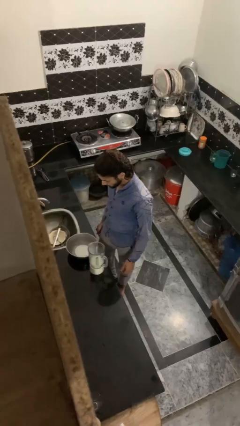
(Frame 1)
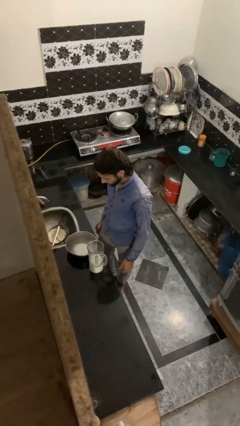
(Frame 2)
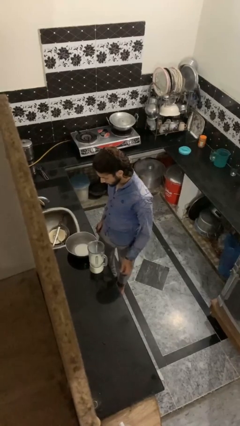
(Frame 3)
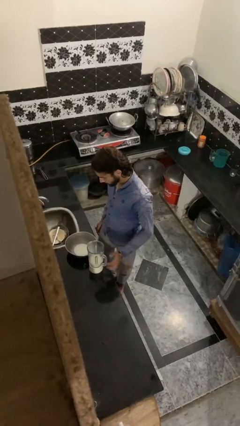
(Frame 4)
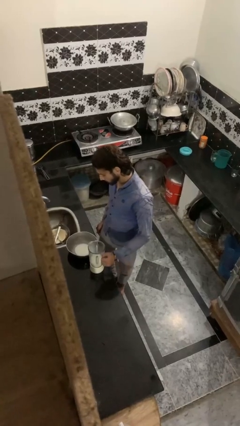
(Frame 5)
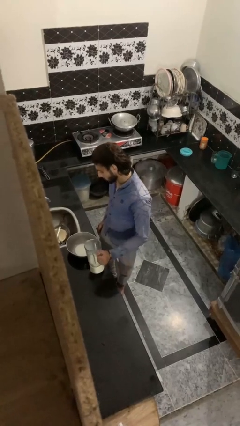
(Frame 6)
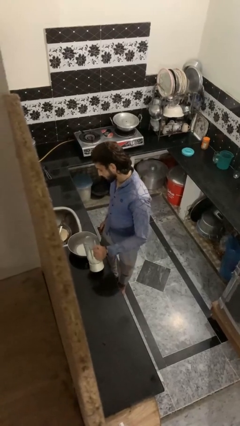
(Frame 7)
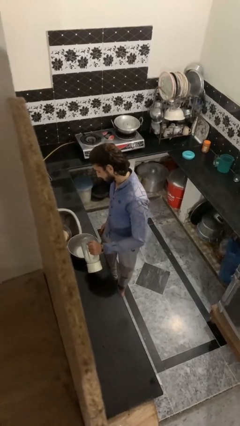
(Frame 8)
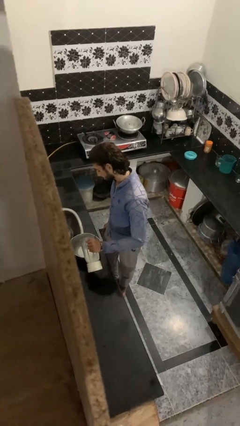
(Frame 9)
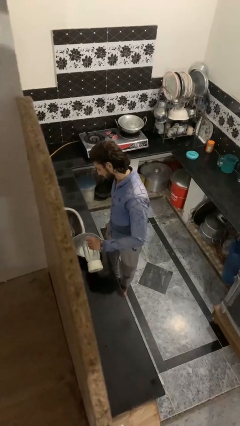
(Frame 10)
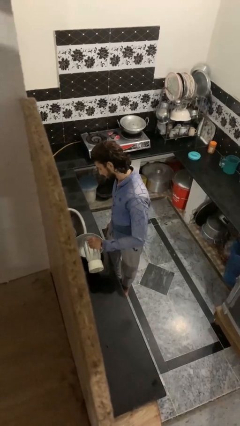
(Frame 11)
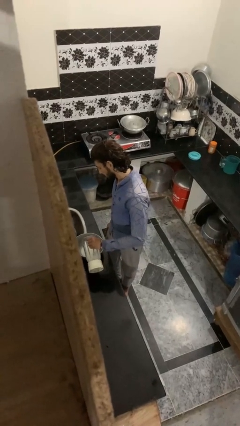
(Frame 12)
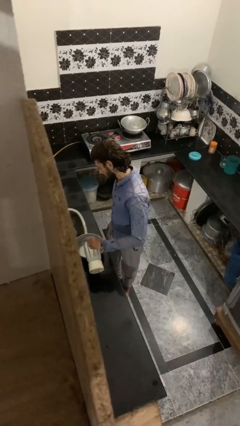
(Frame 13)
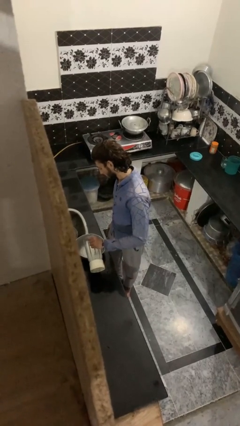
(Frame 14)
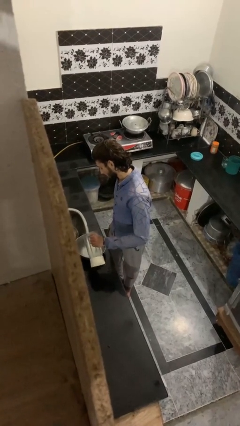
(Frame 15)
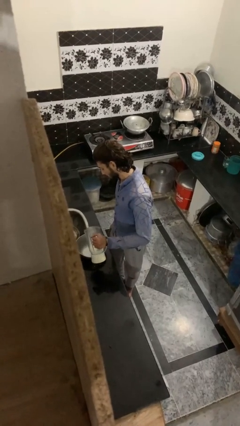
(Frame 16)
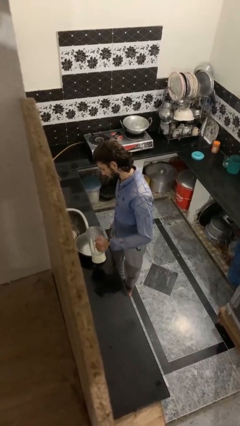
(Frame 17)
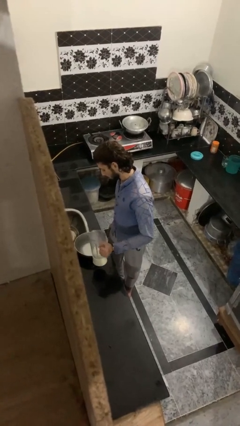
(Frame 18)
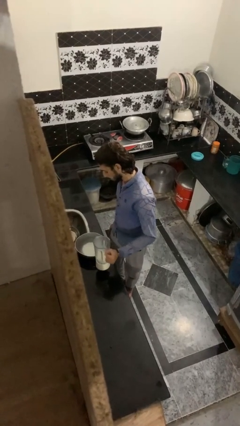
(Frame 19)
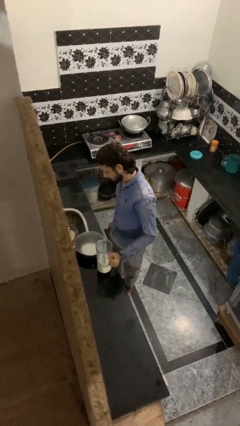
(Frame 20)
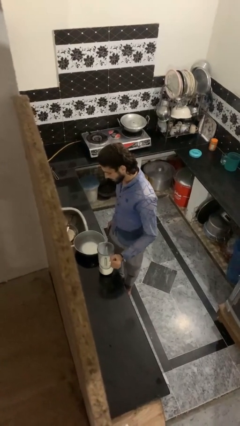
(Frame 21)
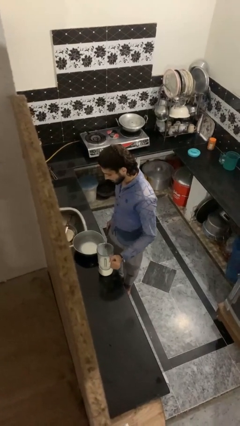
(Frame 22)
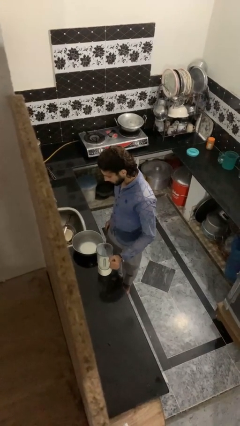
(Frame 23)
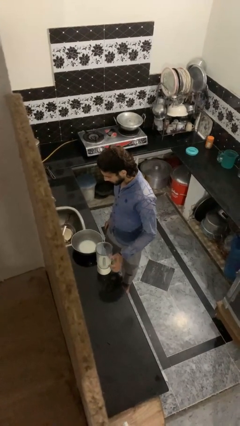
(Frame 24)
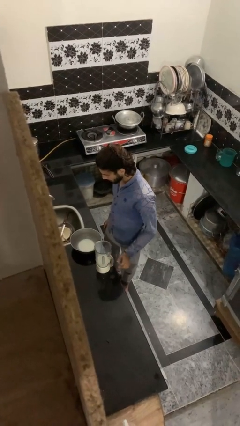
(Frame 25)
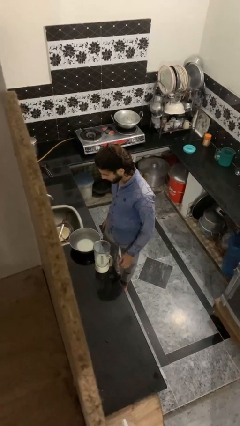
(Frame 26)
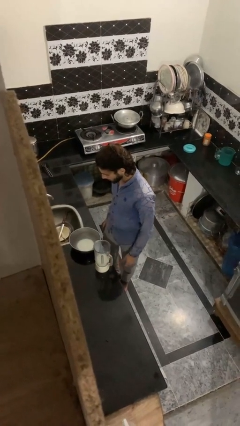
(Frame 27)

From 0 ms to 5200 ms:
person pours into bowl

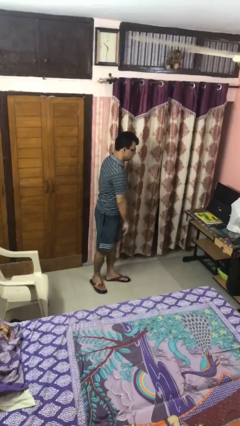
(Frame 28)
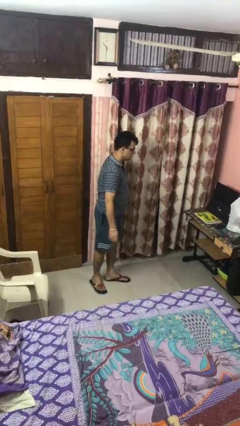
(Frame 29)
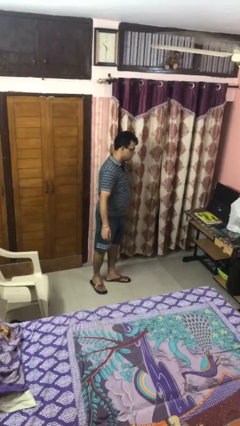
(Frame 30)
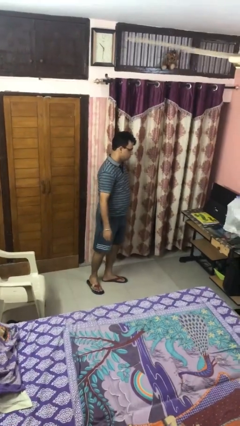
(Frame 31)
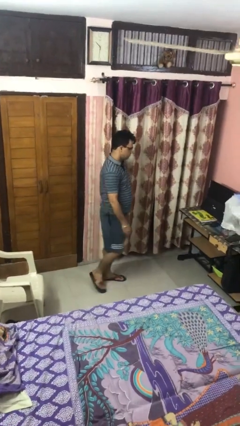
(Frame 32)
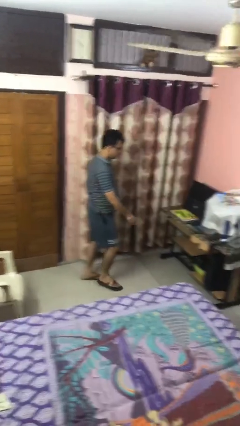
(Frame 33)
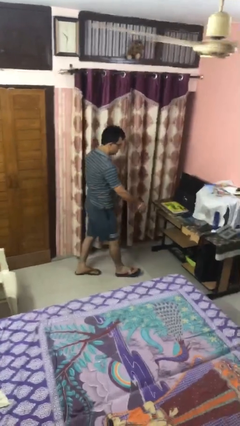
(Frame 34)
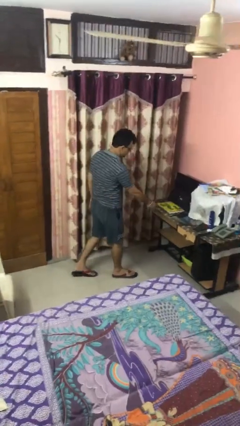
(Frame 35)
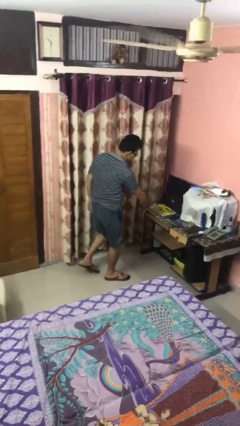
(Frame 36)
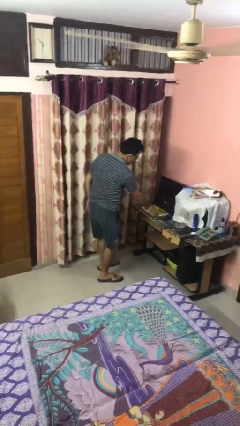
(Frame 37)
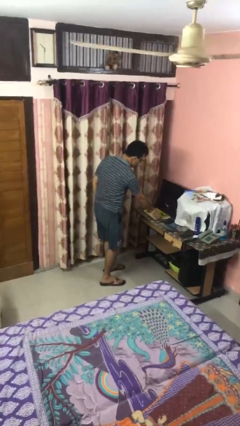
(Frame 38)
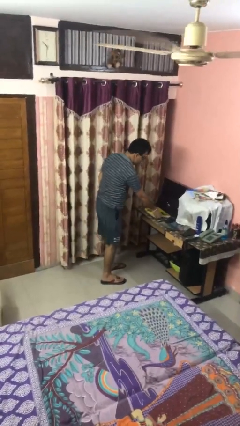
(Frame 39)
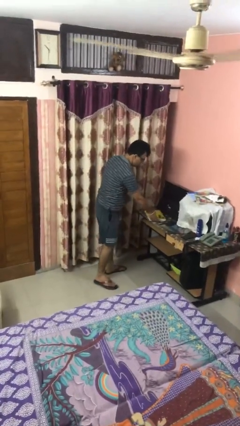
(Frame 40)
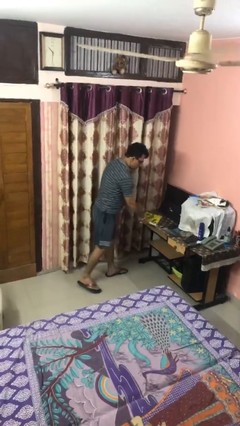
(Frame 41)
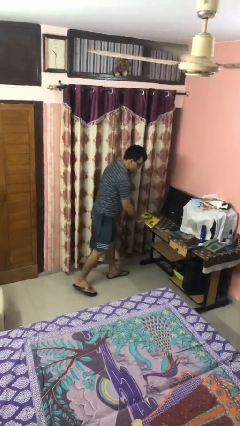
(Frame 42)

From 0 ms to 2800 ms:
person picks up object from table

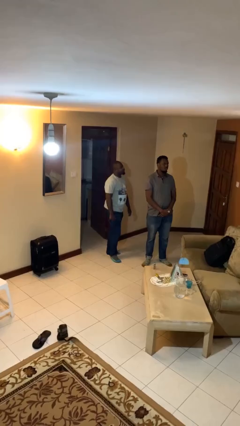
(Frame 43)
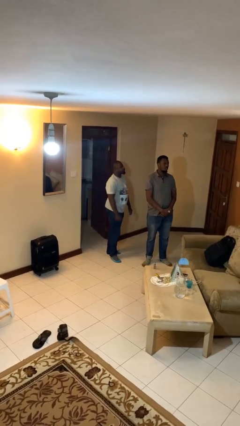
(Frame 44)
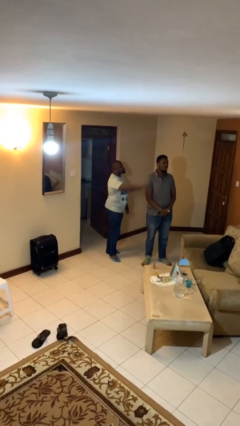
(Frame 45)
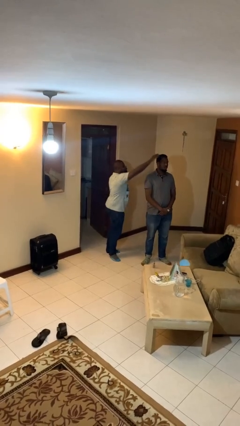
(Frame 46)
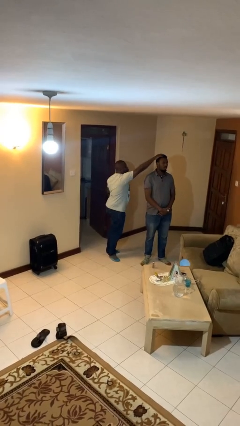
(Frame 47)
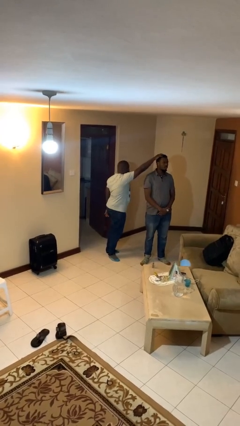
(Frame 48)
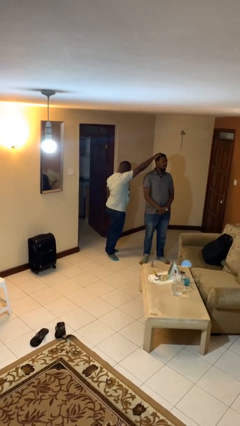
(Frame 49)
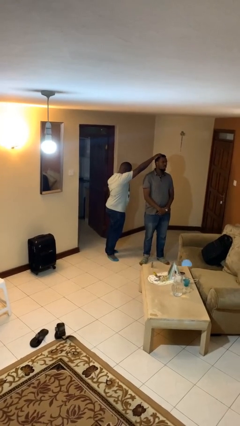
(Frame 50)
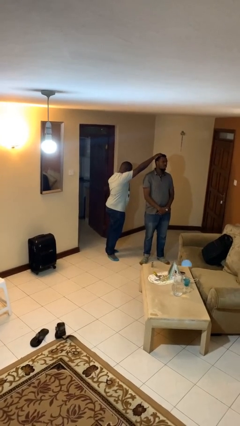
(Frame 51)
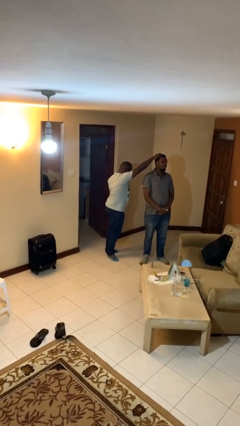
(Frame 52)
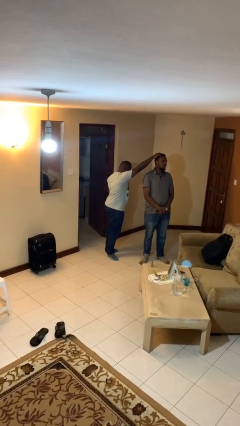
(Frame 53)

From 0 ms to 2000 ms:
person grabs person by hair

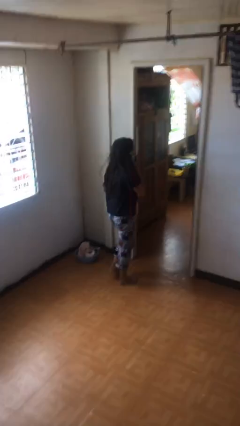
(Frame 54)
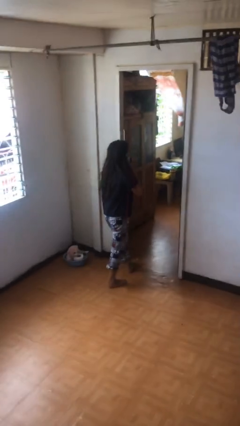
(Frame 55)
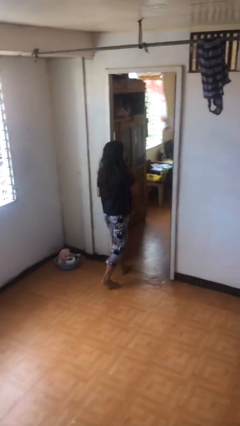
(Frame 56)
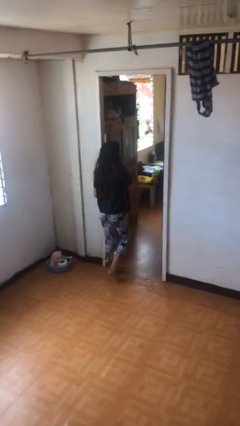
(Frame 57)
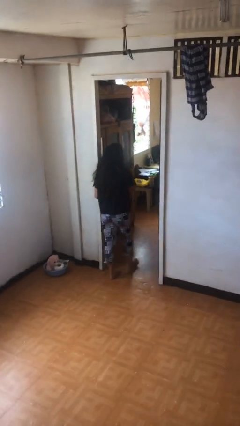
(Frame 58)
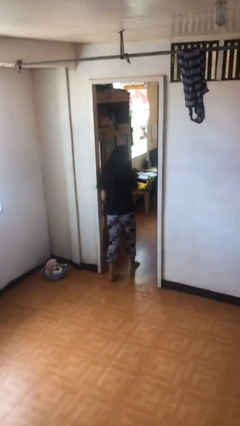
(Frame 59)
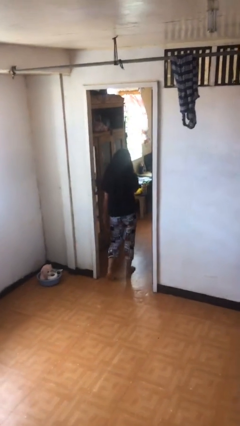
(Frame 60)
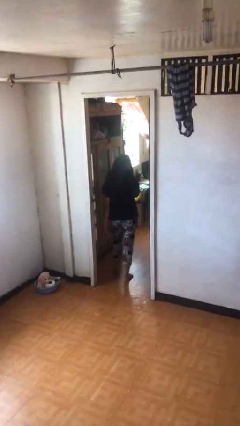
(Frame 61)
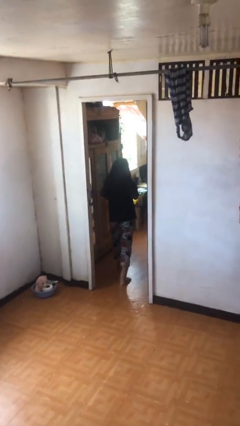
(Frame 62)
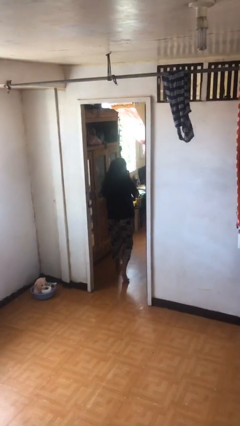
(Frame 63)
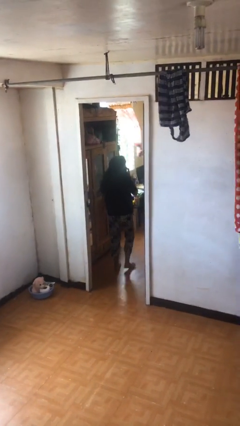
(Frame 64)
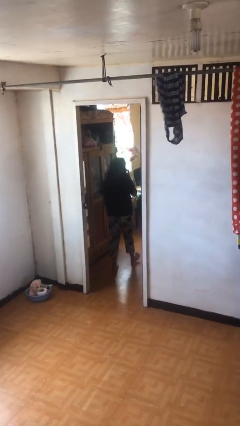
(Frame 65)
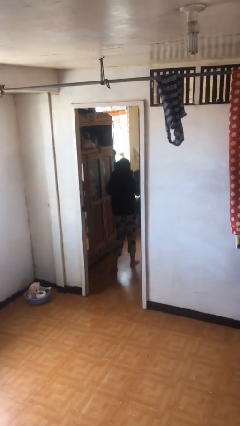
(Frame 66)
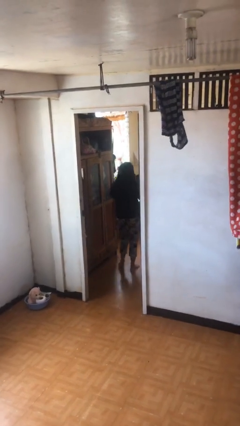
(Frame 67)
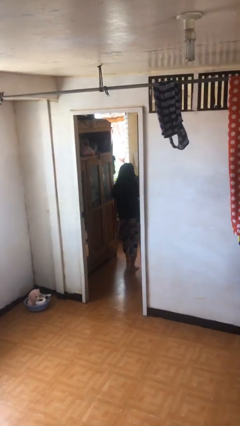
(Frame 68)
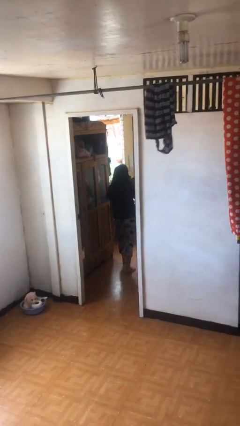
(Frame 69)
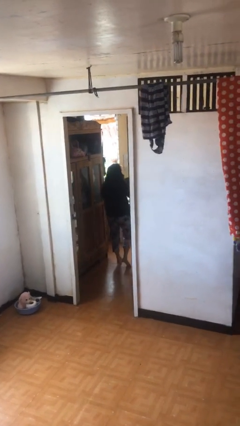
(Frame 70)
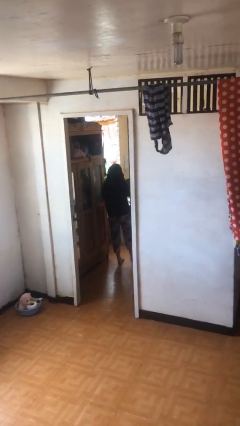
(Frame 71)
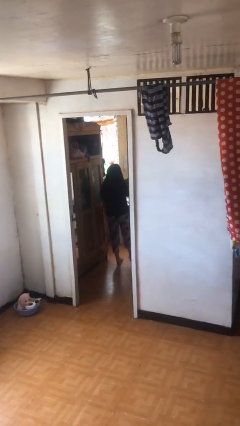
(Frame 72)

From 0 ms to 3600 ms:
person exits scene through structure

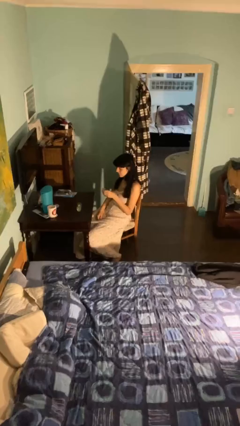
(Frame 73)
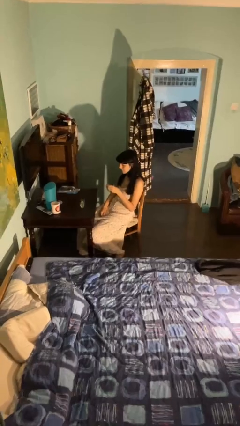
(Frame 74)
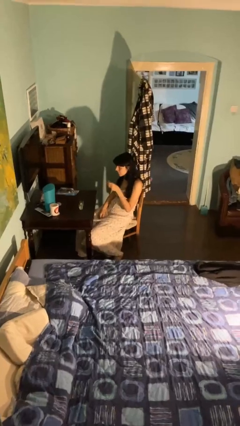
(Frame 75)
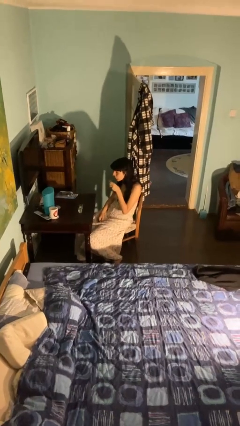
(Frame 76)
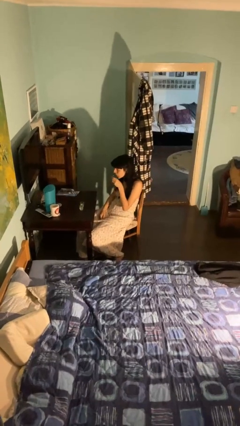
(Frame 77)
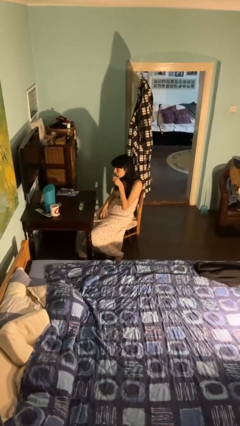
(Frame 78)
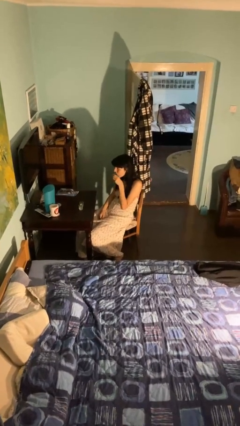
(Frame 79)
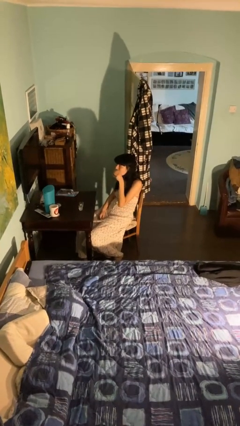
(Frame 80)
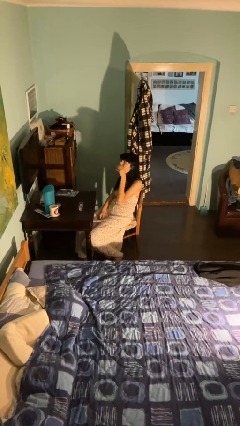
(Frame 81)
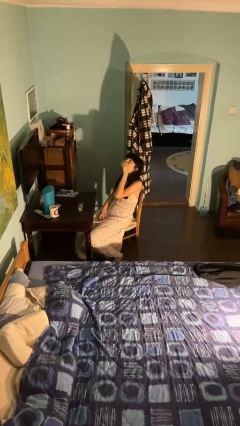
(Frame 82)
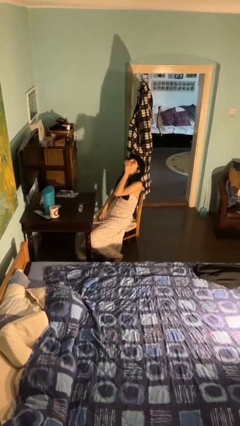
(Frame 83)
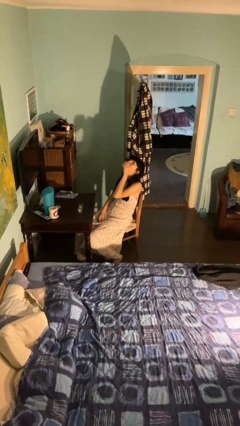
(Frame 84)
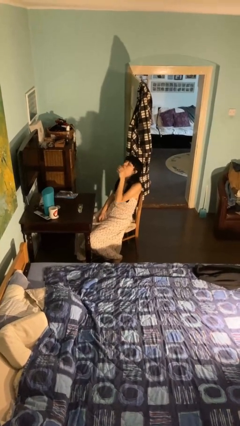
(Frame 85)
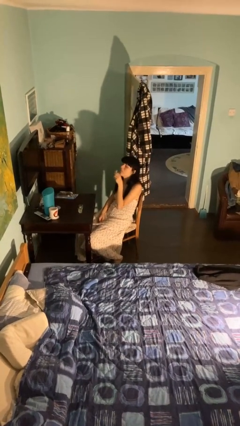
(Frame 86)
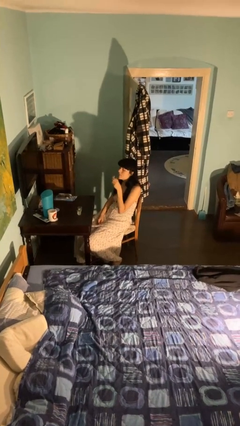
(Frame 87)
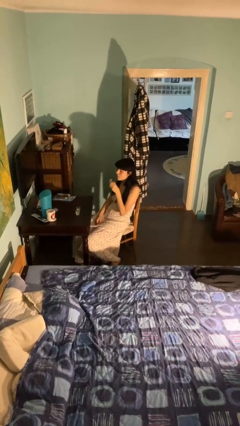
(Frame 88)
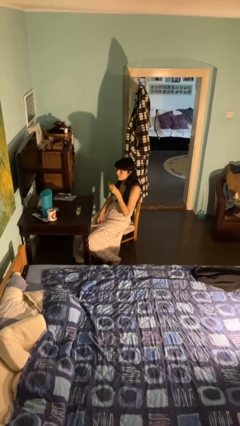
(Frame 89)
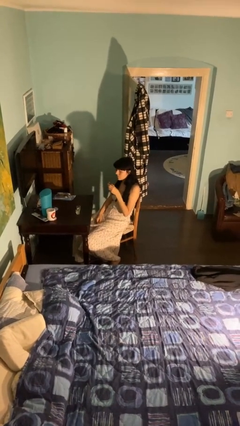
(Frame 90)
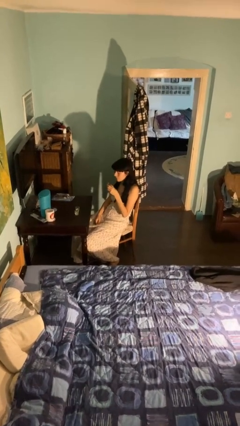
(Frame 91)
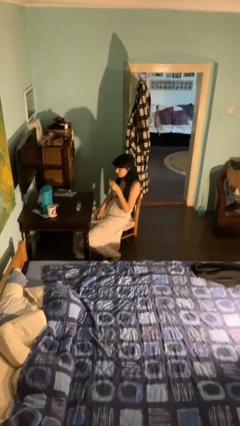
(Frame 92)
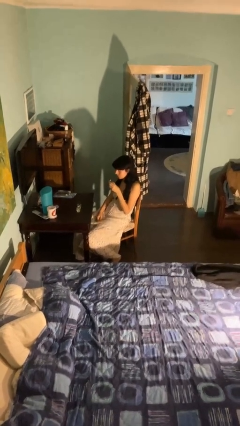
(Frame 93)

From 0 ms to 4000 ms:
person drinks from shotglass

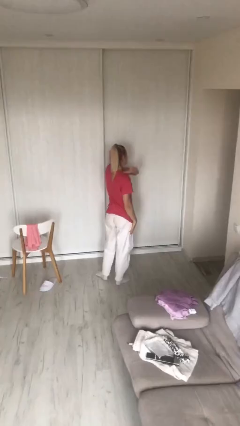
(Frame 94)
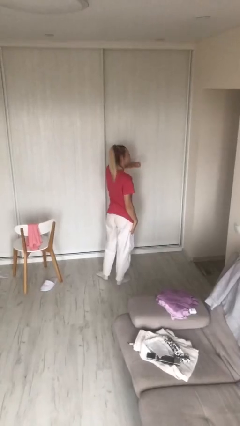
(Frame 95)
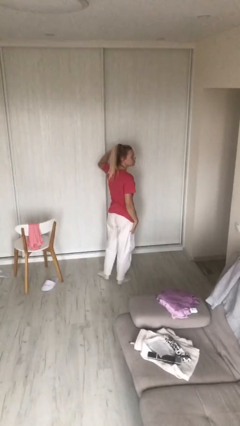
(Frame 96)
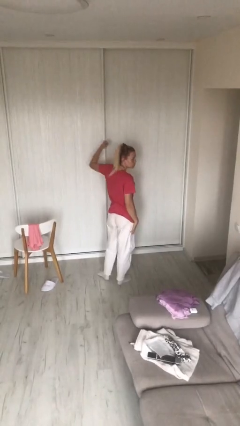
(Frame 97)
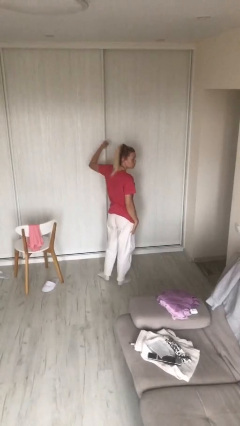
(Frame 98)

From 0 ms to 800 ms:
person gestures cut
